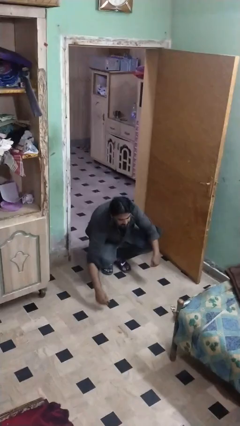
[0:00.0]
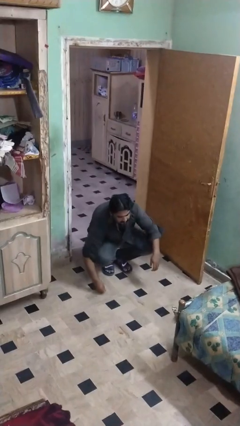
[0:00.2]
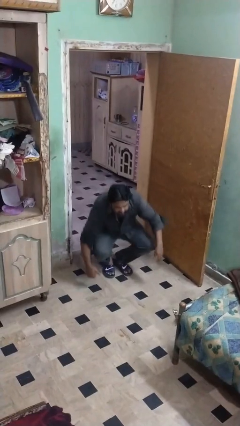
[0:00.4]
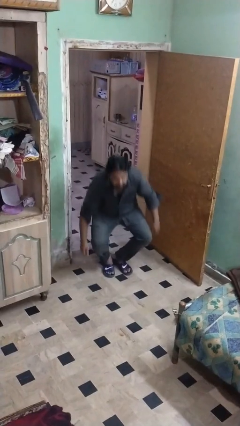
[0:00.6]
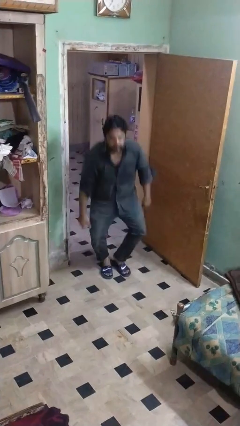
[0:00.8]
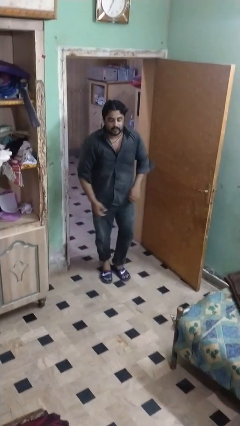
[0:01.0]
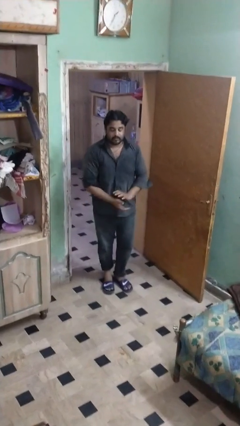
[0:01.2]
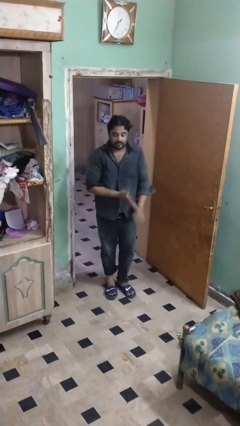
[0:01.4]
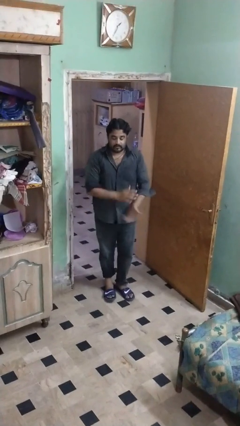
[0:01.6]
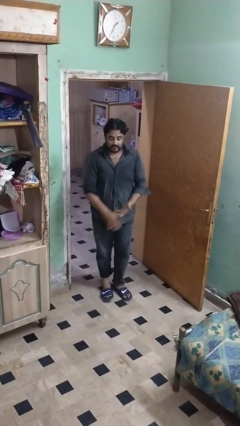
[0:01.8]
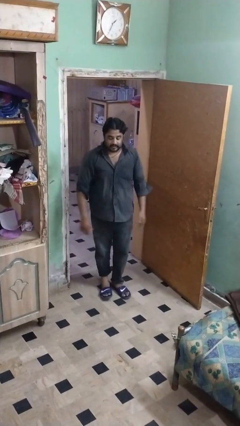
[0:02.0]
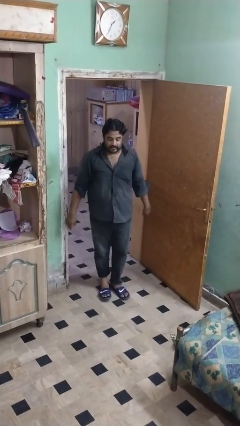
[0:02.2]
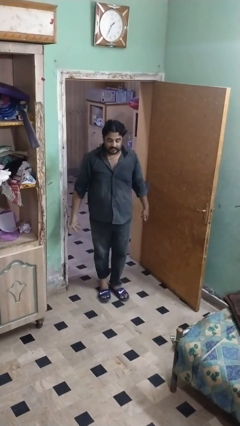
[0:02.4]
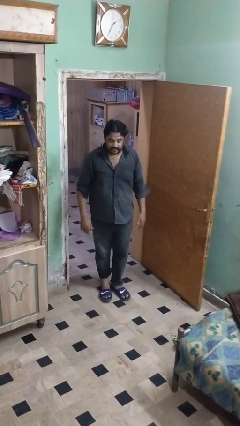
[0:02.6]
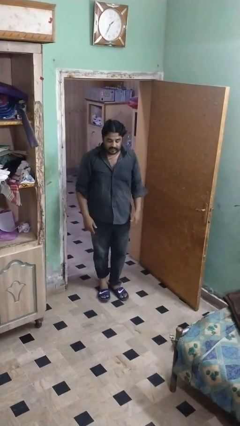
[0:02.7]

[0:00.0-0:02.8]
person stands up from floor

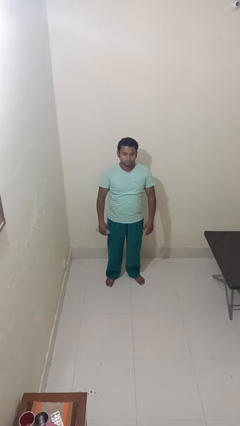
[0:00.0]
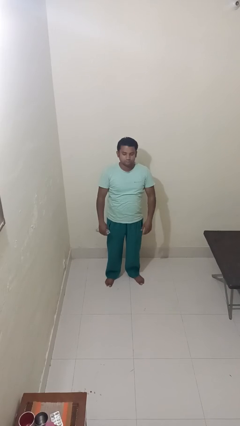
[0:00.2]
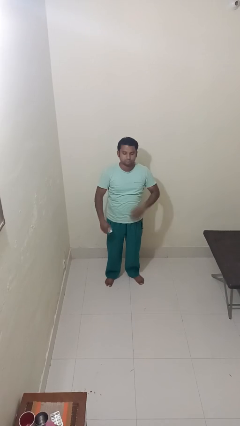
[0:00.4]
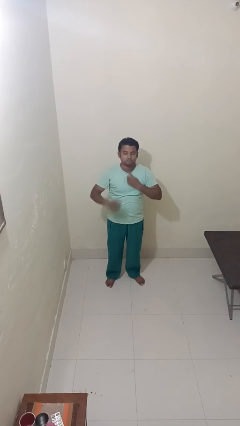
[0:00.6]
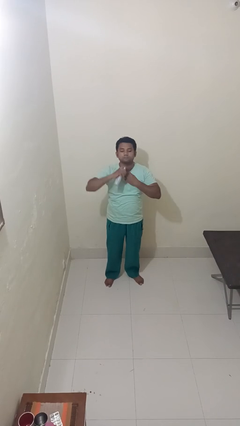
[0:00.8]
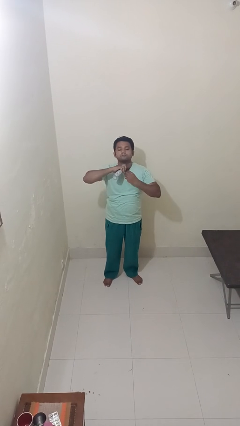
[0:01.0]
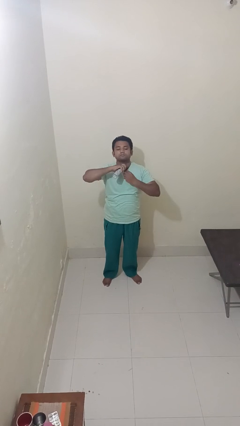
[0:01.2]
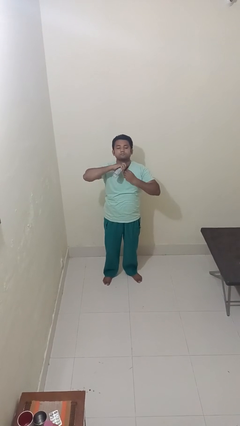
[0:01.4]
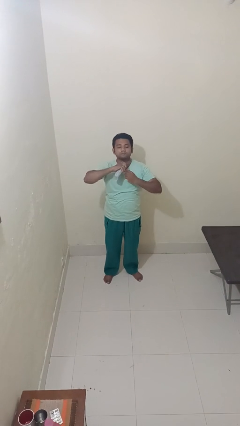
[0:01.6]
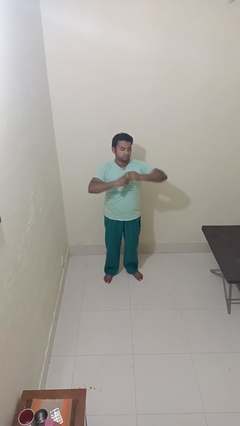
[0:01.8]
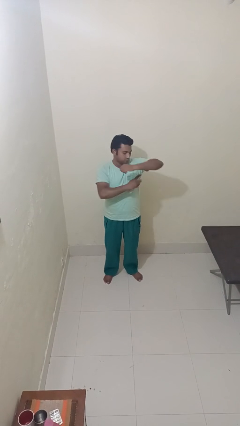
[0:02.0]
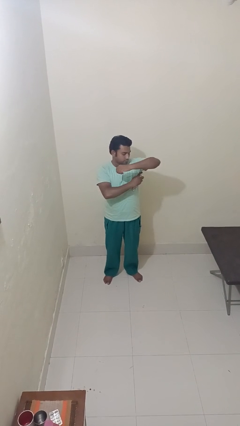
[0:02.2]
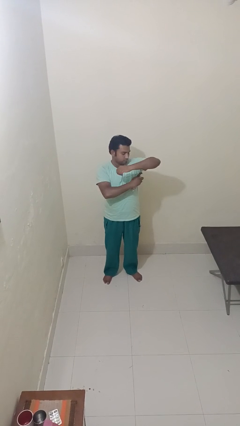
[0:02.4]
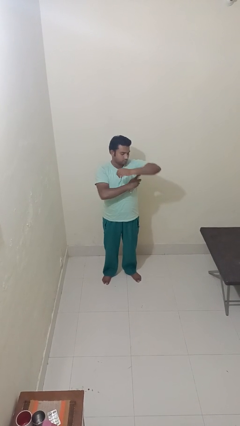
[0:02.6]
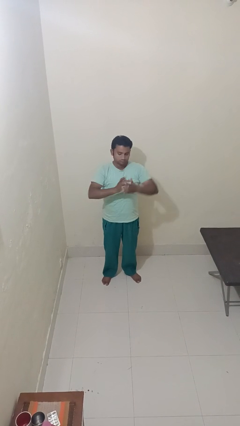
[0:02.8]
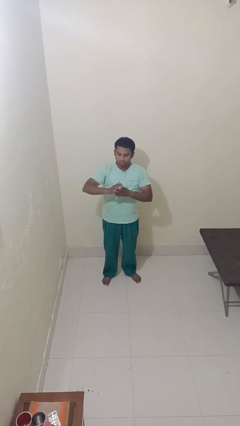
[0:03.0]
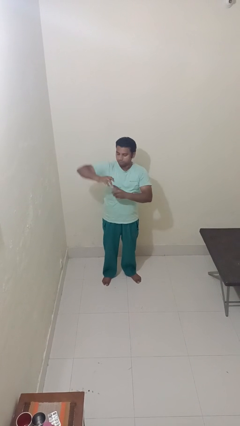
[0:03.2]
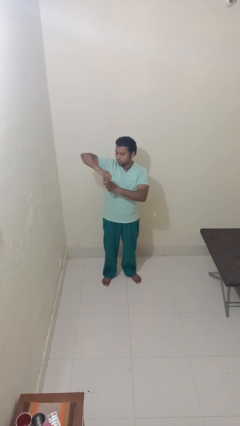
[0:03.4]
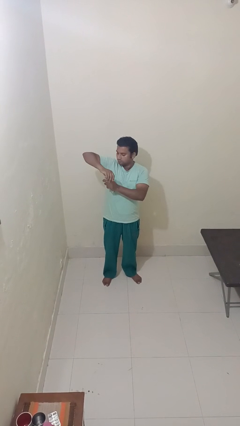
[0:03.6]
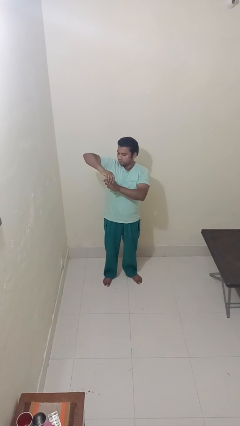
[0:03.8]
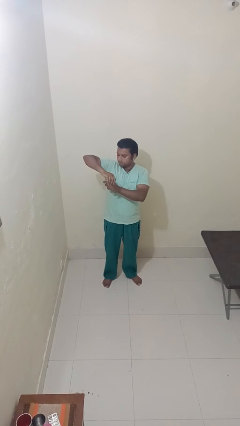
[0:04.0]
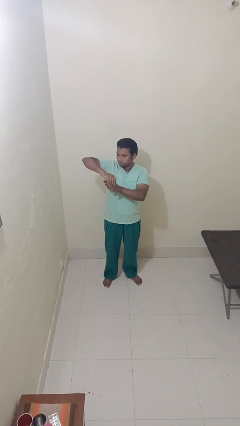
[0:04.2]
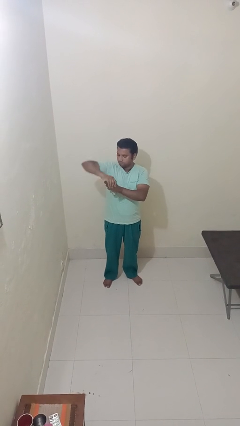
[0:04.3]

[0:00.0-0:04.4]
person applies deodorant

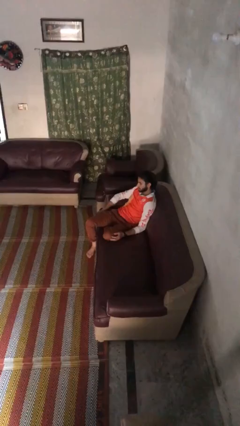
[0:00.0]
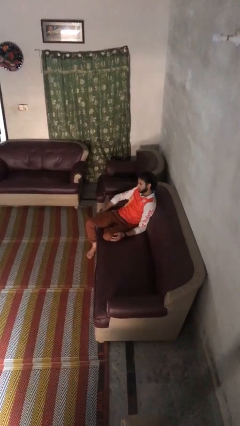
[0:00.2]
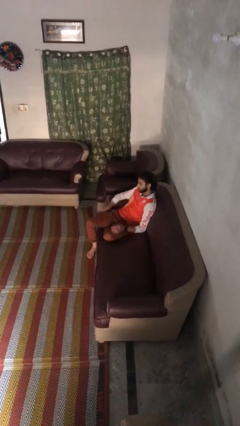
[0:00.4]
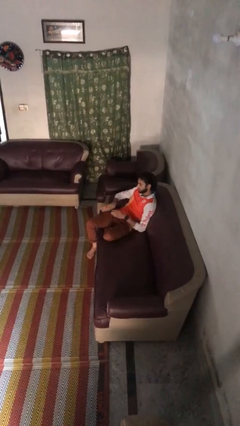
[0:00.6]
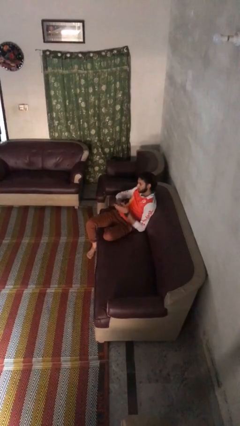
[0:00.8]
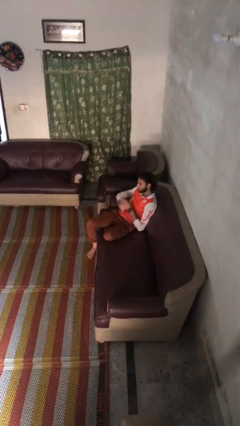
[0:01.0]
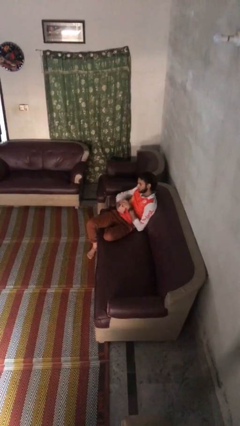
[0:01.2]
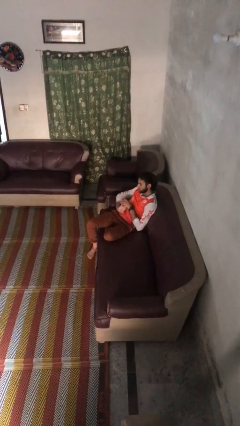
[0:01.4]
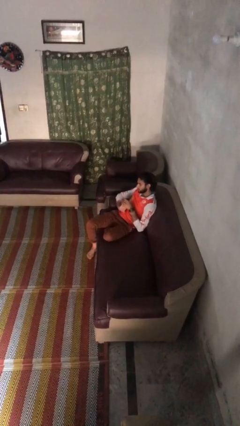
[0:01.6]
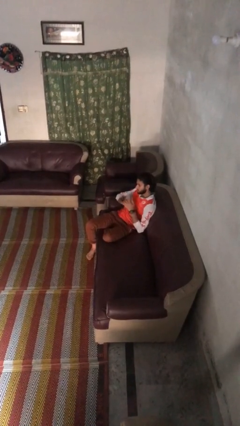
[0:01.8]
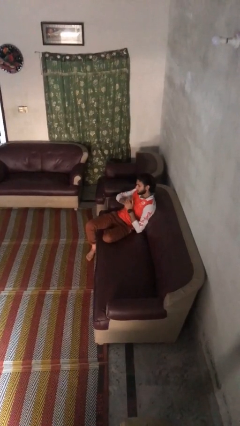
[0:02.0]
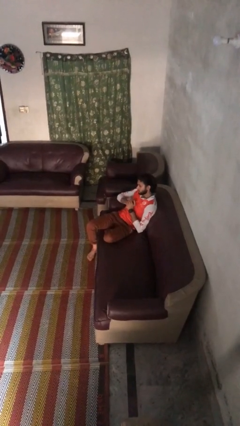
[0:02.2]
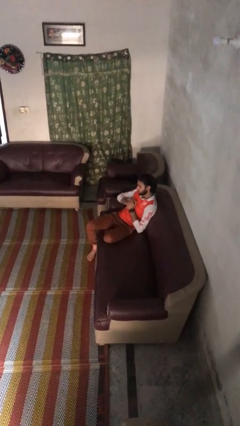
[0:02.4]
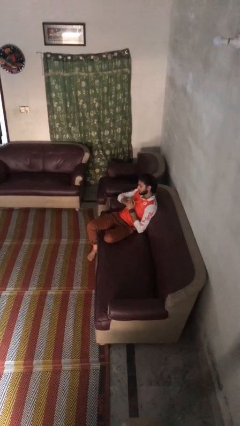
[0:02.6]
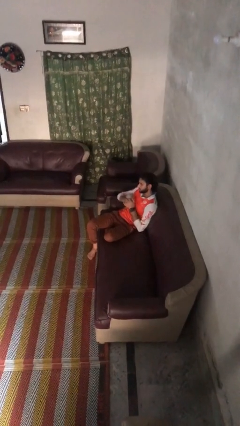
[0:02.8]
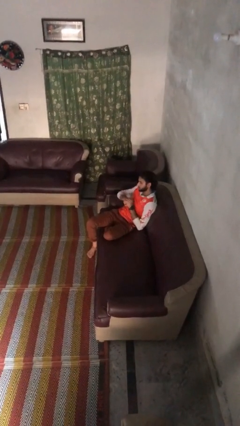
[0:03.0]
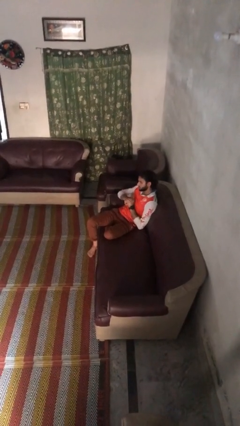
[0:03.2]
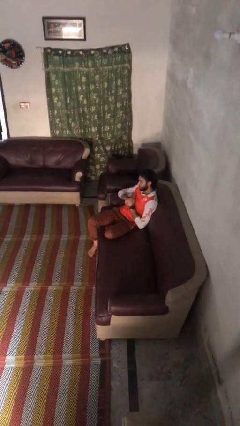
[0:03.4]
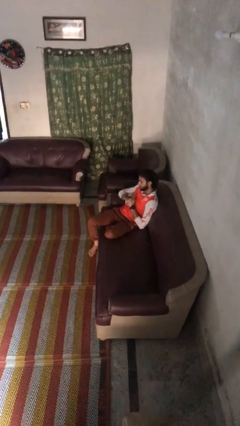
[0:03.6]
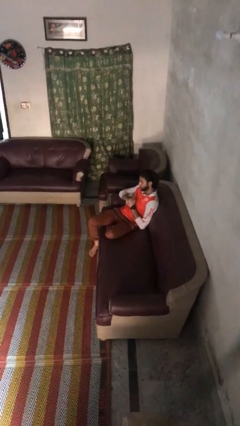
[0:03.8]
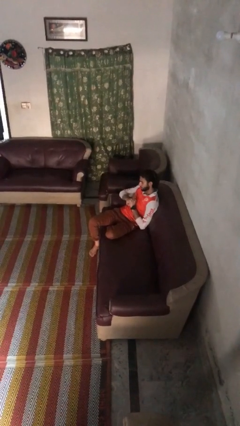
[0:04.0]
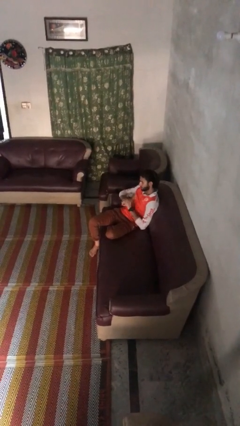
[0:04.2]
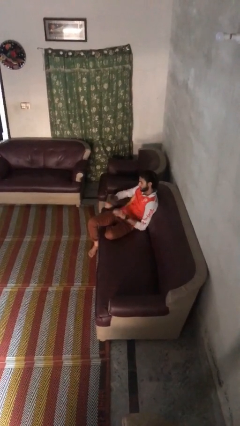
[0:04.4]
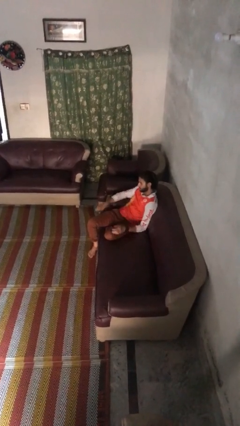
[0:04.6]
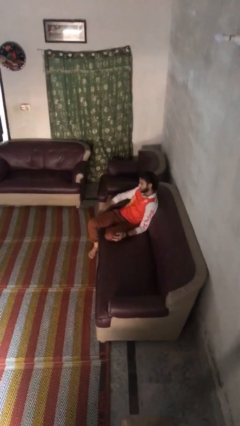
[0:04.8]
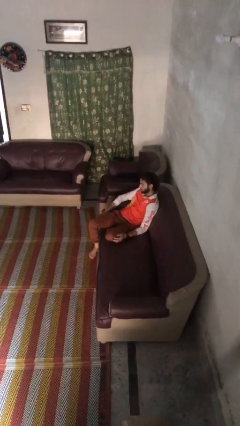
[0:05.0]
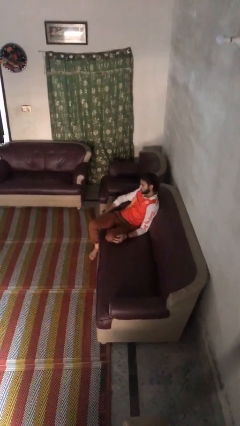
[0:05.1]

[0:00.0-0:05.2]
person cracks knuckles

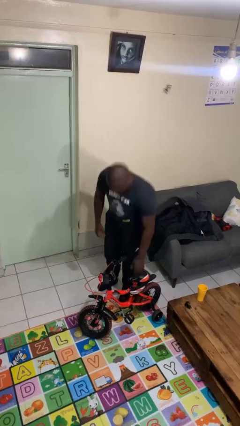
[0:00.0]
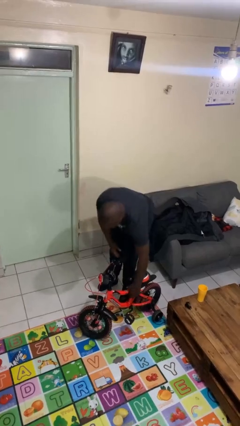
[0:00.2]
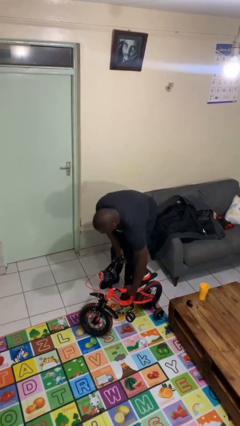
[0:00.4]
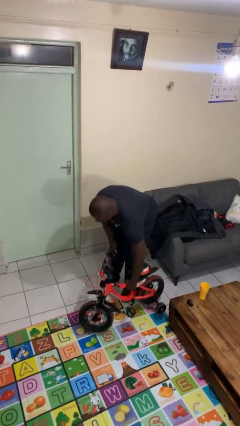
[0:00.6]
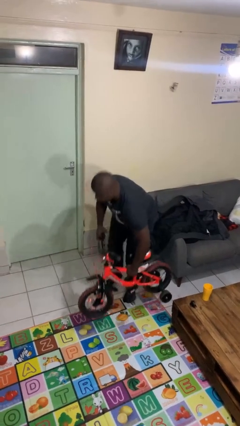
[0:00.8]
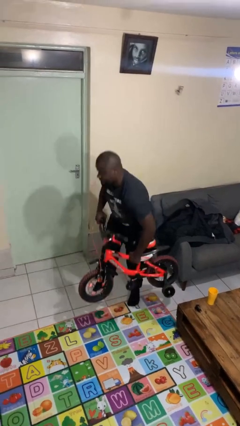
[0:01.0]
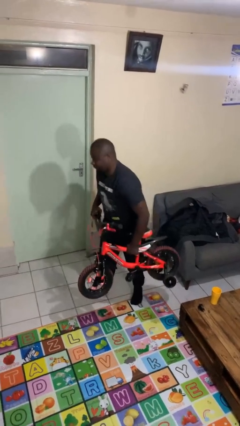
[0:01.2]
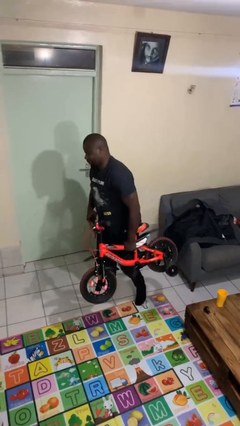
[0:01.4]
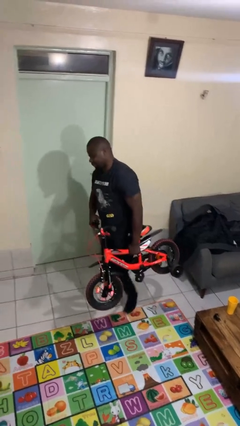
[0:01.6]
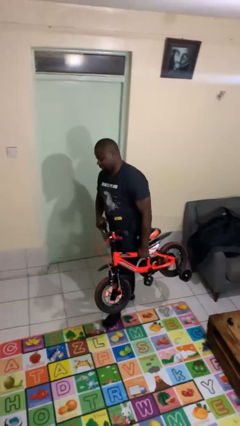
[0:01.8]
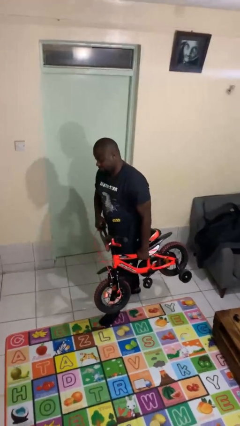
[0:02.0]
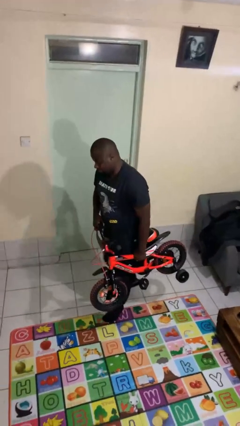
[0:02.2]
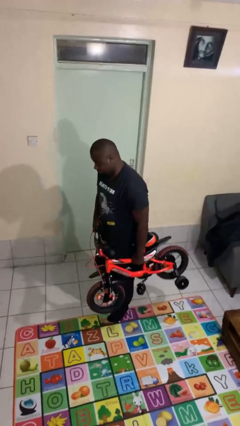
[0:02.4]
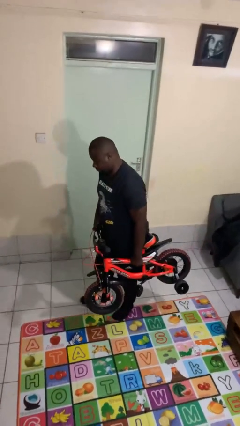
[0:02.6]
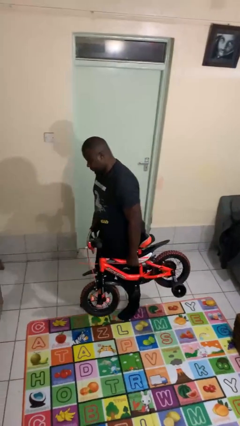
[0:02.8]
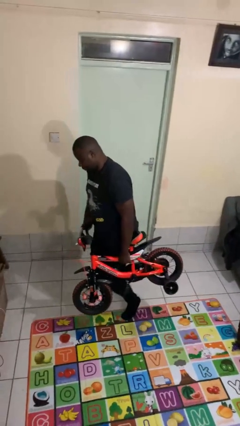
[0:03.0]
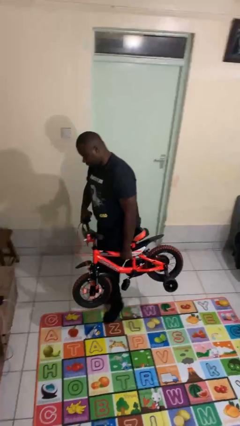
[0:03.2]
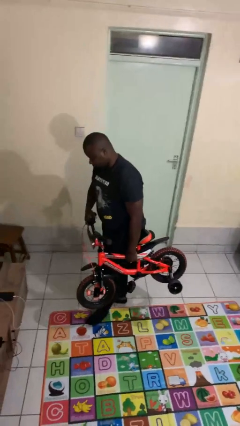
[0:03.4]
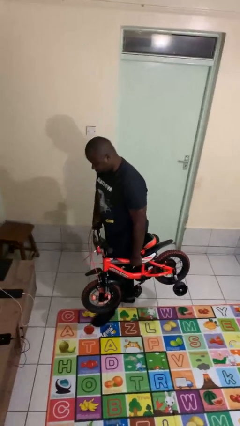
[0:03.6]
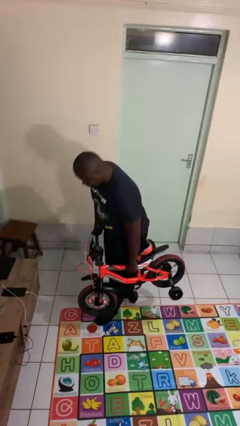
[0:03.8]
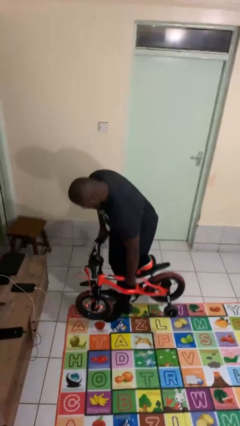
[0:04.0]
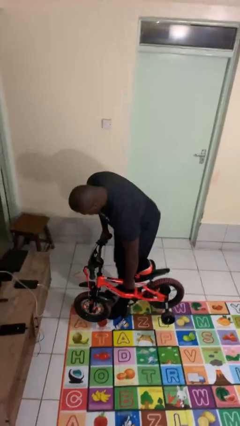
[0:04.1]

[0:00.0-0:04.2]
person carries bicycle

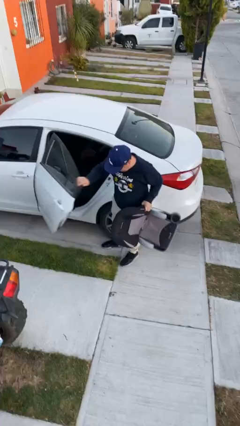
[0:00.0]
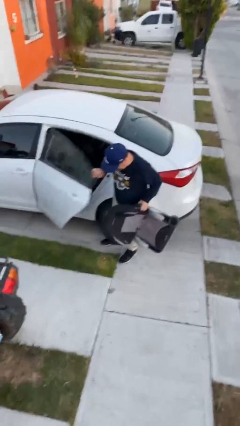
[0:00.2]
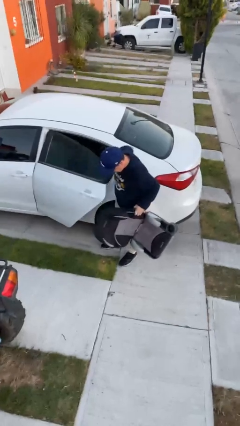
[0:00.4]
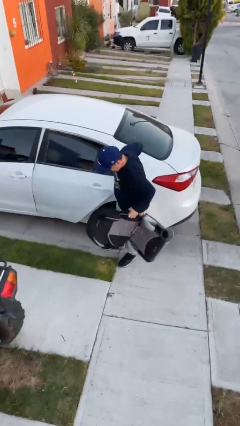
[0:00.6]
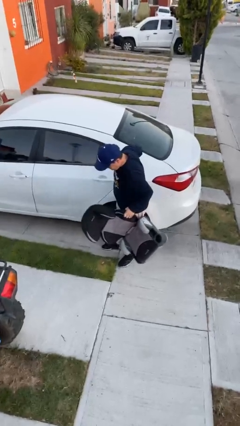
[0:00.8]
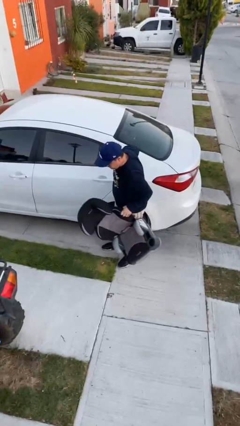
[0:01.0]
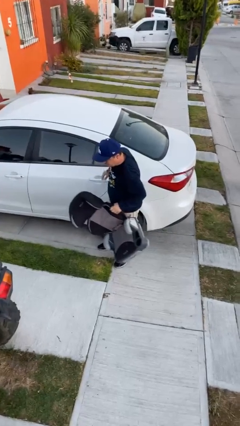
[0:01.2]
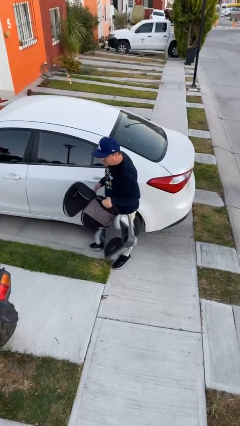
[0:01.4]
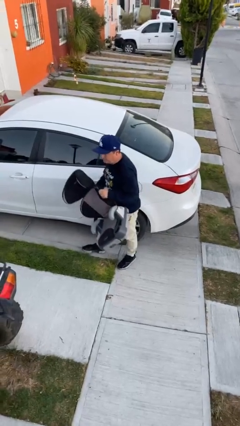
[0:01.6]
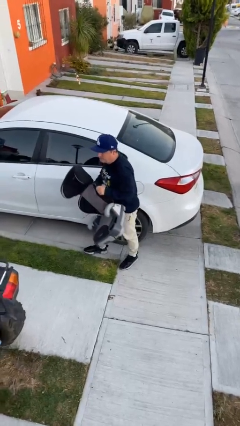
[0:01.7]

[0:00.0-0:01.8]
person closes car door
